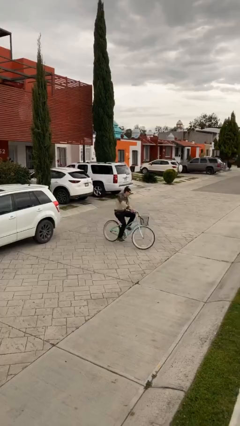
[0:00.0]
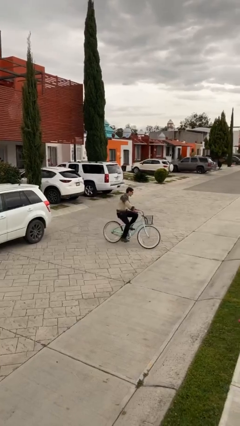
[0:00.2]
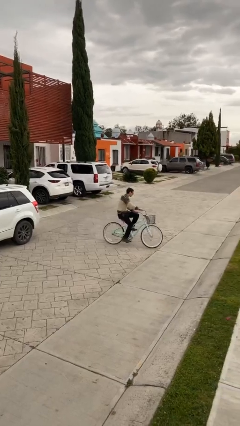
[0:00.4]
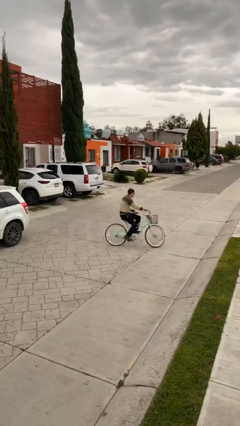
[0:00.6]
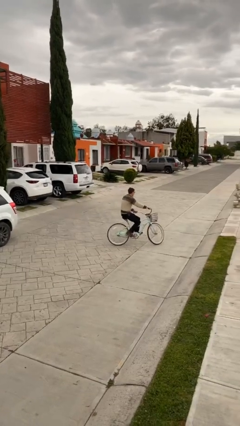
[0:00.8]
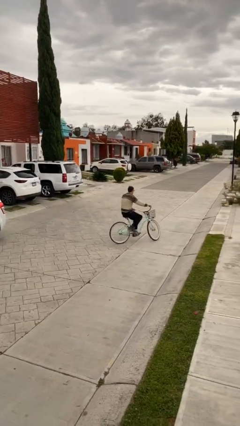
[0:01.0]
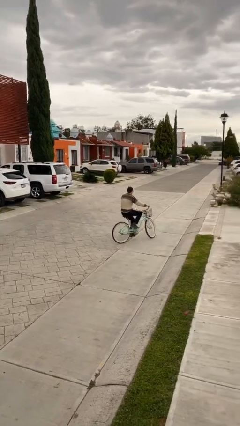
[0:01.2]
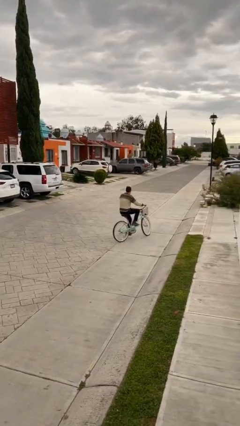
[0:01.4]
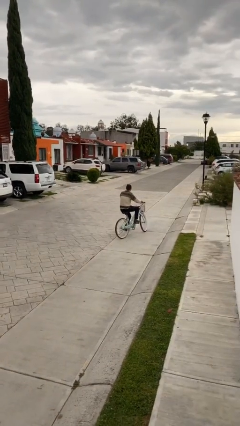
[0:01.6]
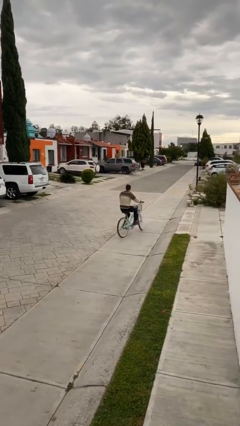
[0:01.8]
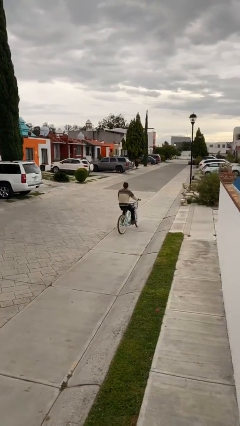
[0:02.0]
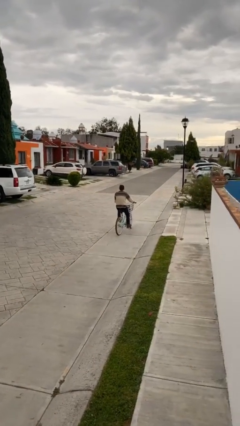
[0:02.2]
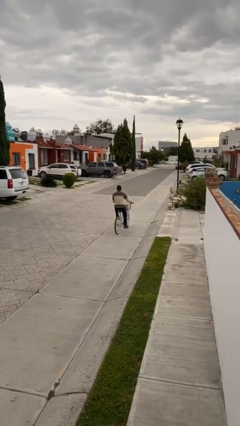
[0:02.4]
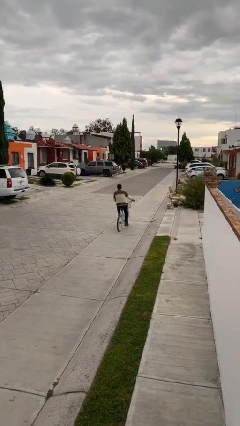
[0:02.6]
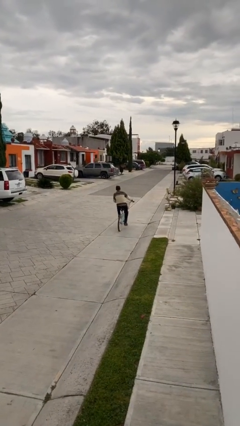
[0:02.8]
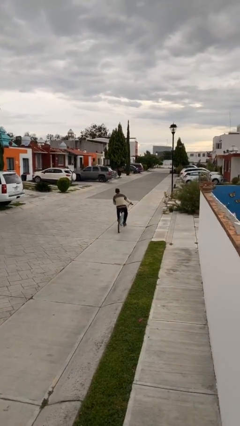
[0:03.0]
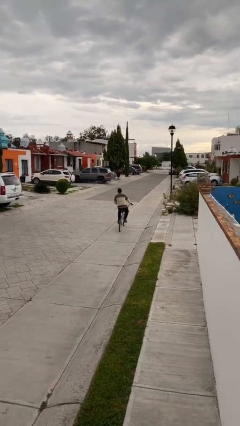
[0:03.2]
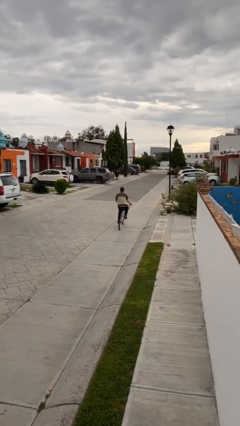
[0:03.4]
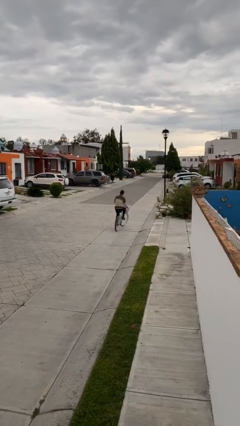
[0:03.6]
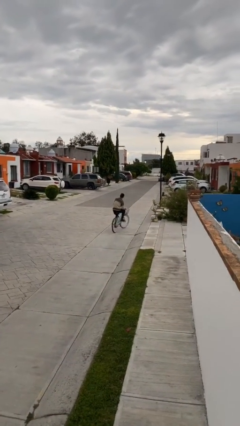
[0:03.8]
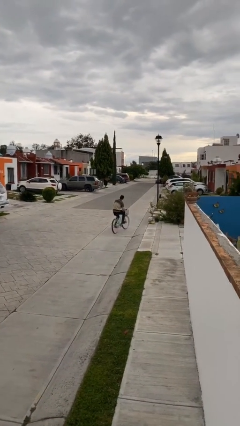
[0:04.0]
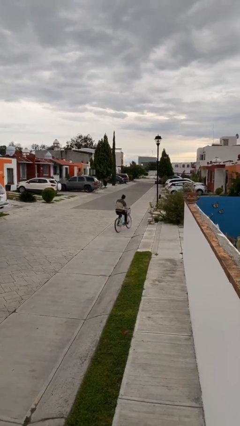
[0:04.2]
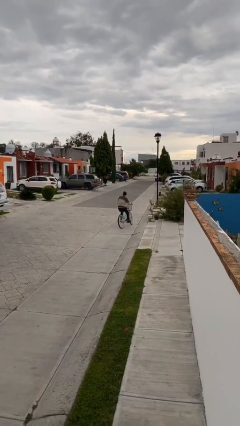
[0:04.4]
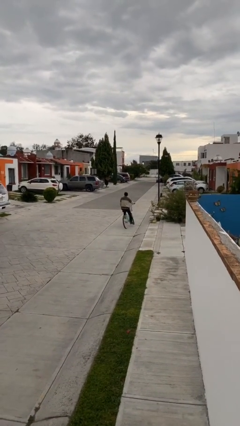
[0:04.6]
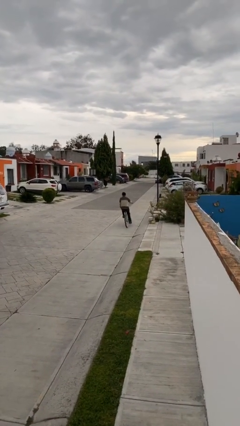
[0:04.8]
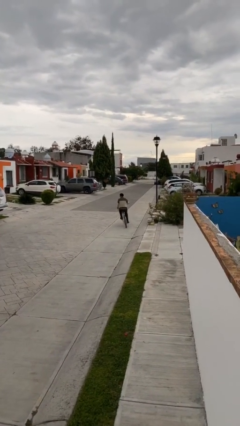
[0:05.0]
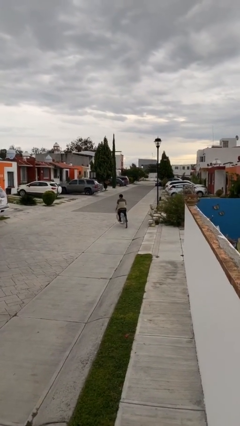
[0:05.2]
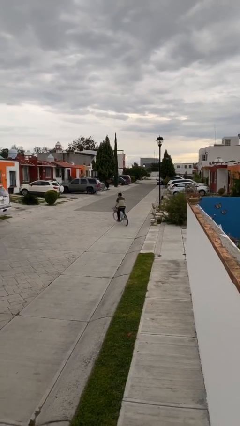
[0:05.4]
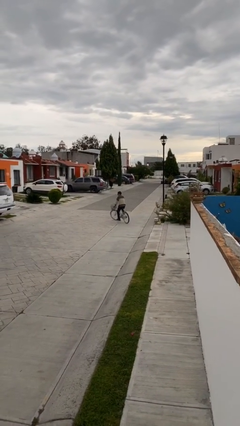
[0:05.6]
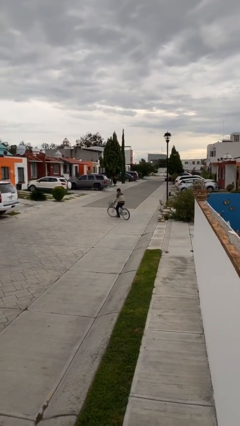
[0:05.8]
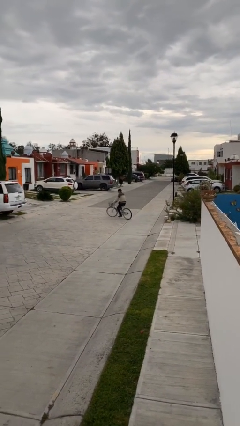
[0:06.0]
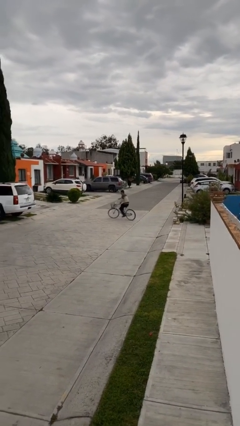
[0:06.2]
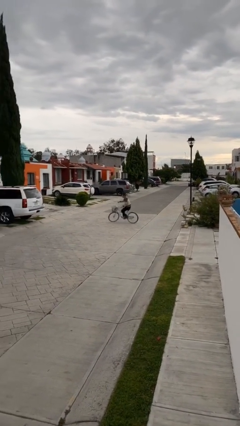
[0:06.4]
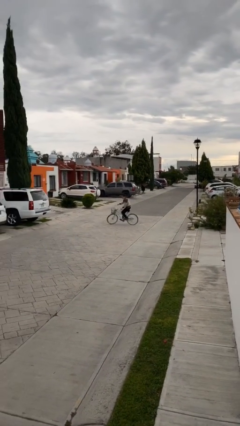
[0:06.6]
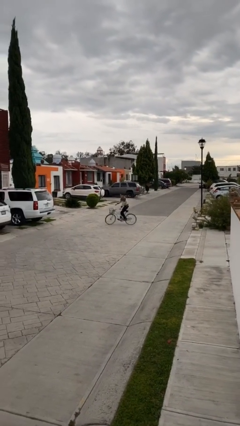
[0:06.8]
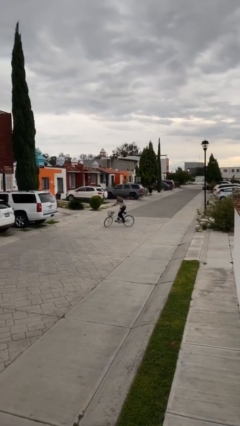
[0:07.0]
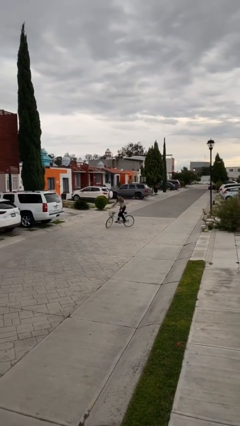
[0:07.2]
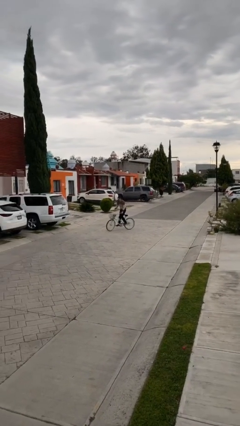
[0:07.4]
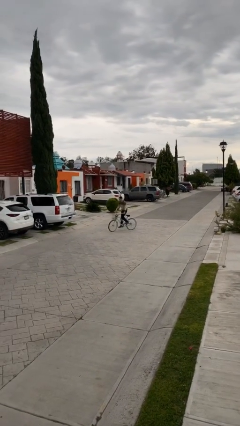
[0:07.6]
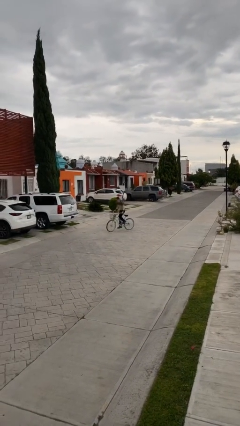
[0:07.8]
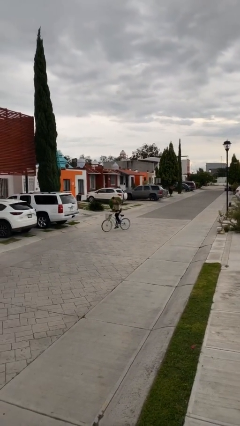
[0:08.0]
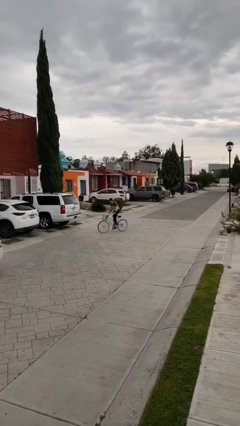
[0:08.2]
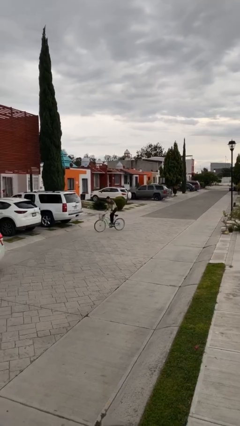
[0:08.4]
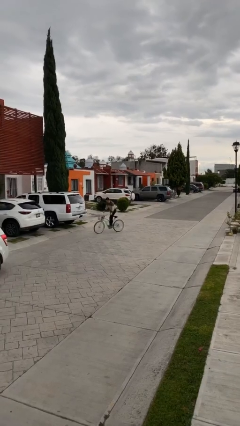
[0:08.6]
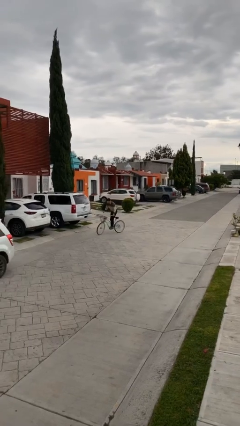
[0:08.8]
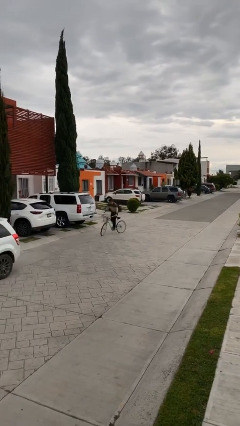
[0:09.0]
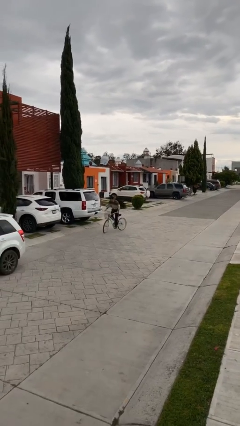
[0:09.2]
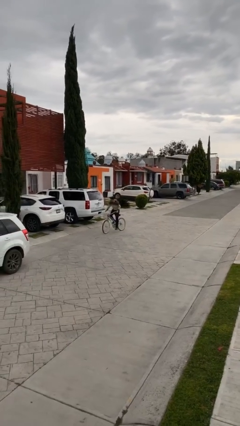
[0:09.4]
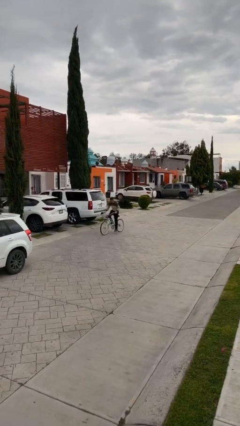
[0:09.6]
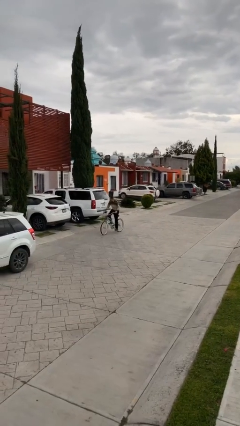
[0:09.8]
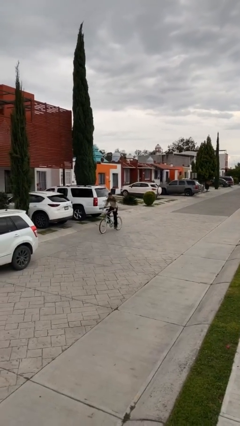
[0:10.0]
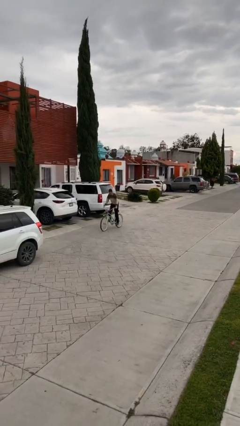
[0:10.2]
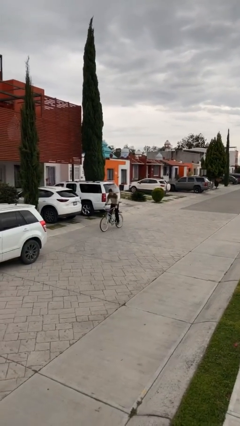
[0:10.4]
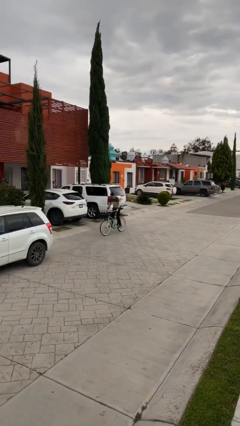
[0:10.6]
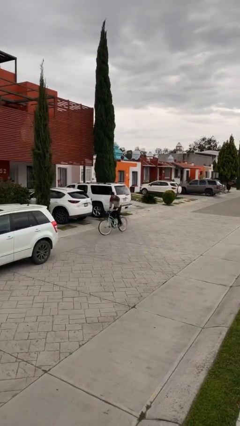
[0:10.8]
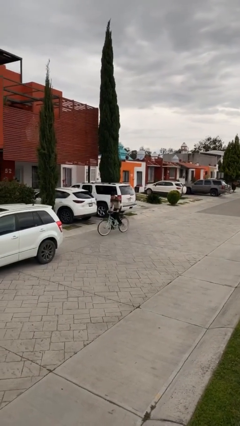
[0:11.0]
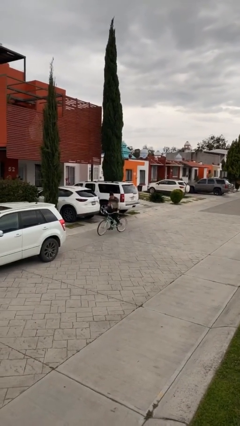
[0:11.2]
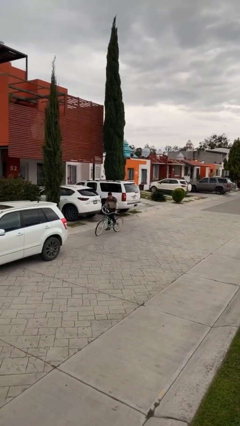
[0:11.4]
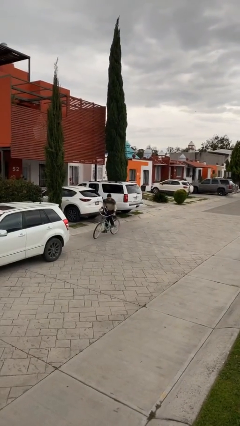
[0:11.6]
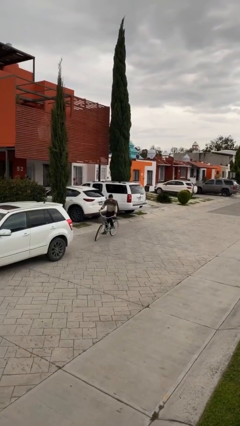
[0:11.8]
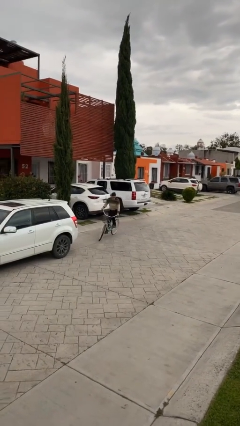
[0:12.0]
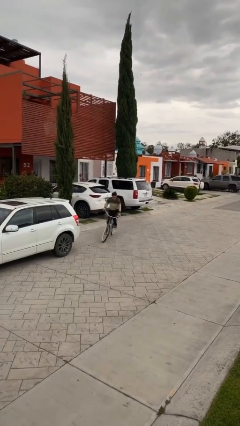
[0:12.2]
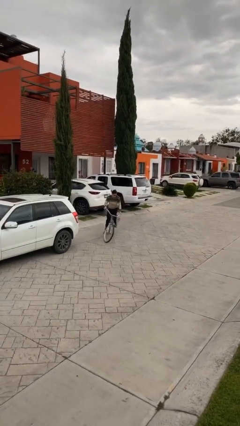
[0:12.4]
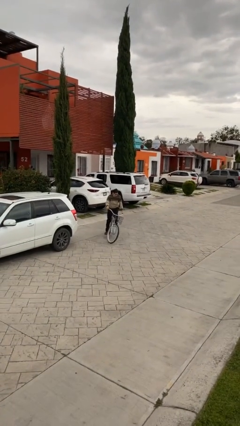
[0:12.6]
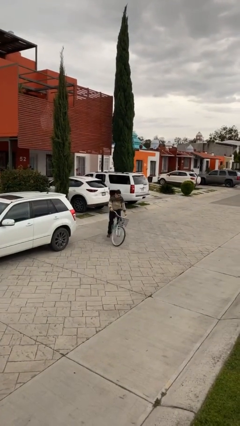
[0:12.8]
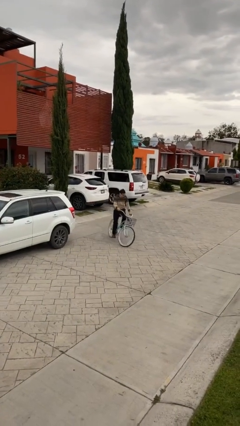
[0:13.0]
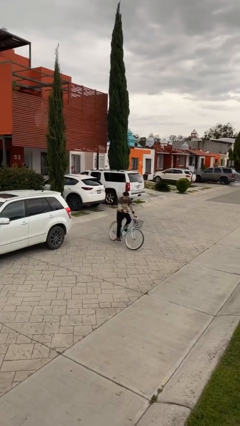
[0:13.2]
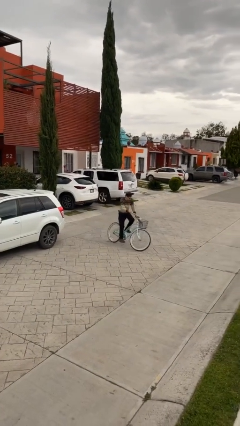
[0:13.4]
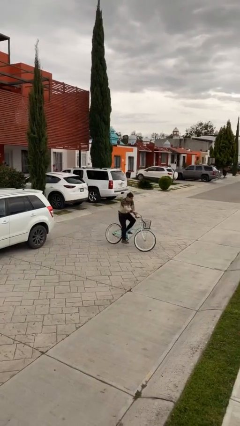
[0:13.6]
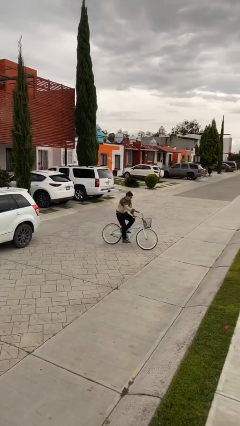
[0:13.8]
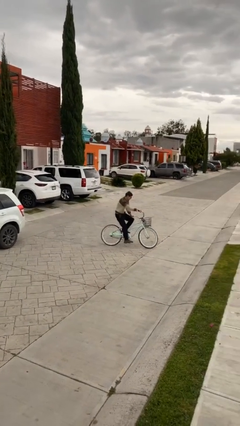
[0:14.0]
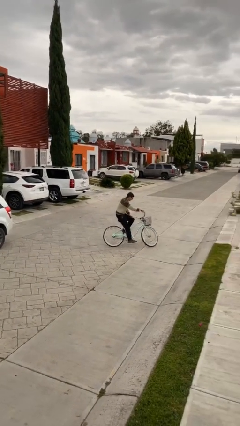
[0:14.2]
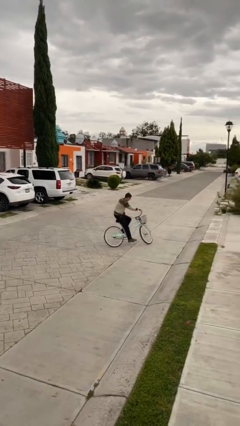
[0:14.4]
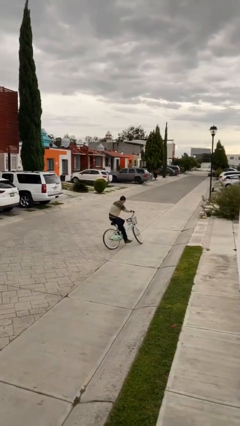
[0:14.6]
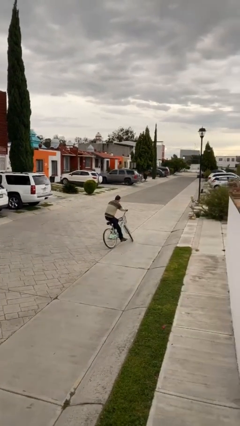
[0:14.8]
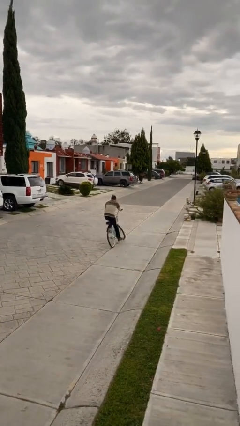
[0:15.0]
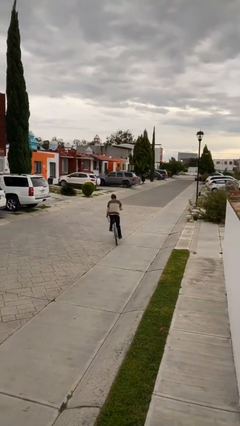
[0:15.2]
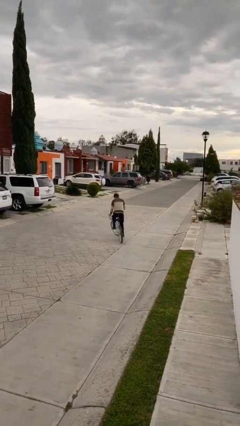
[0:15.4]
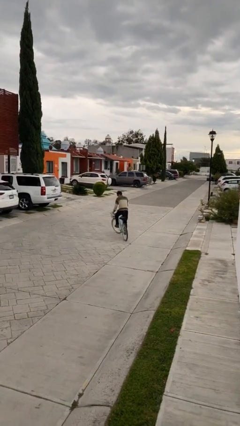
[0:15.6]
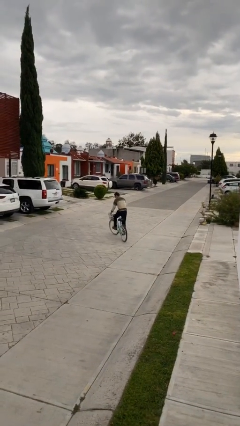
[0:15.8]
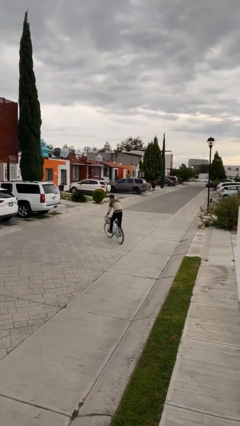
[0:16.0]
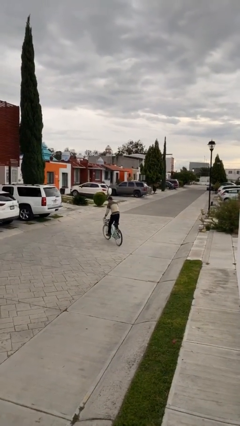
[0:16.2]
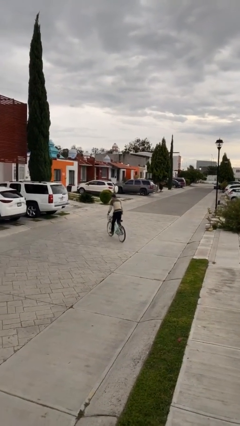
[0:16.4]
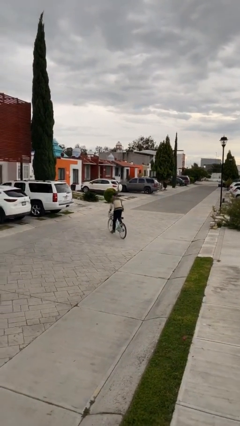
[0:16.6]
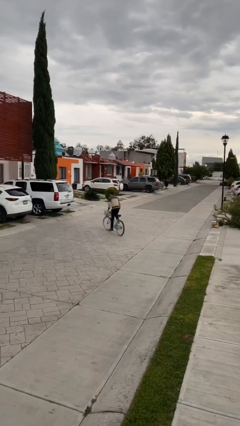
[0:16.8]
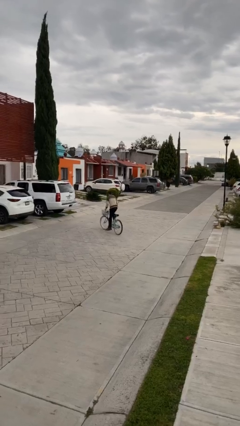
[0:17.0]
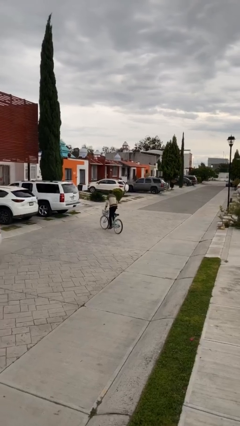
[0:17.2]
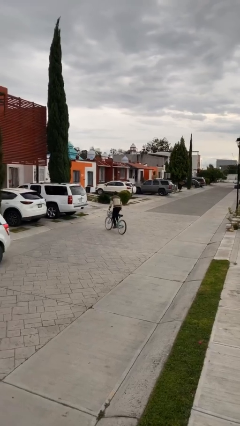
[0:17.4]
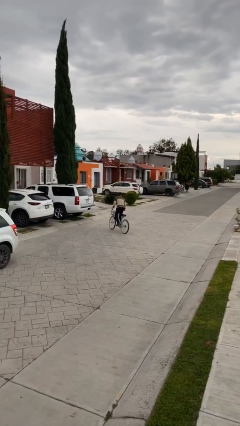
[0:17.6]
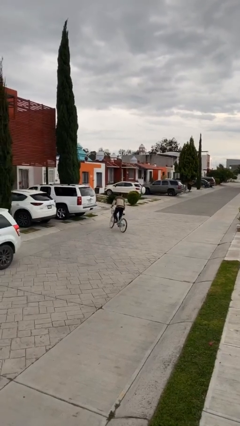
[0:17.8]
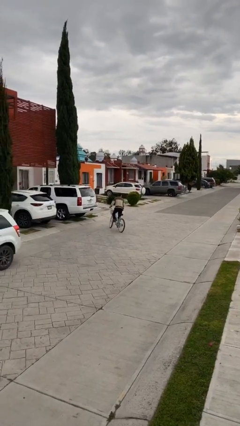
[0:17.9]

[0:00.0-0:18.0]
person rides bicycle
